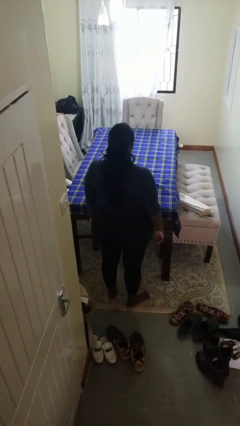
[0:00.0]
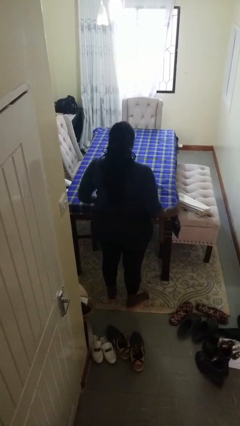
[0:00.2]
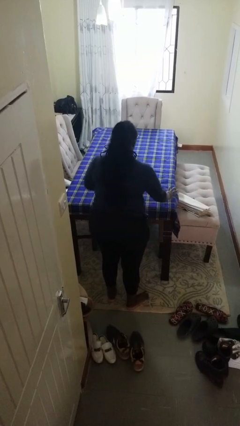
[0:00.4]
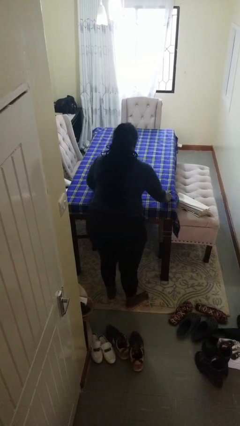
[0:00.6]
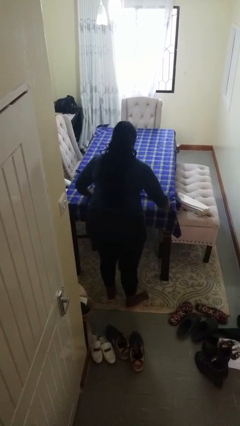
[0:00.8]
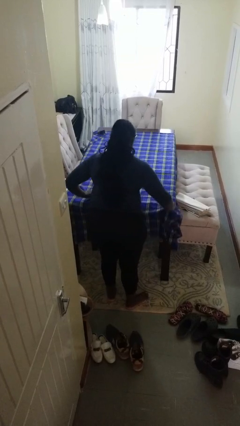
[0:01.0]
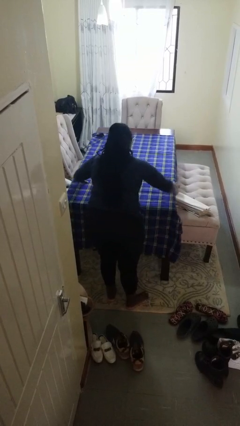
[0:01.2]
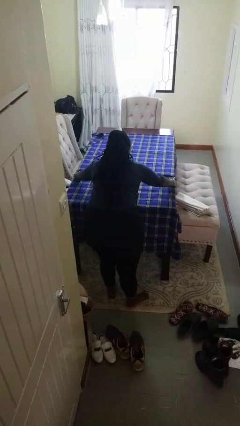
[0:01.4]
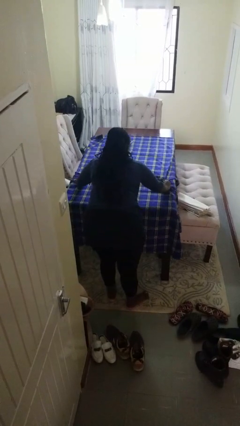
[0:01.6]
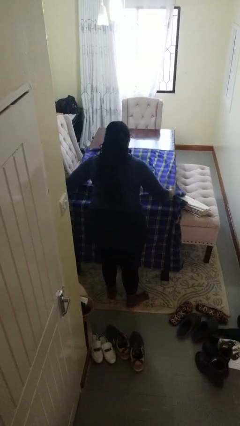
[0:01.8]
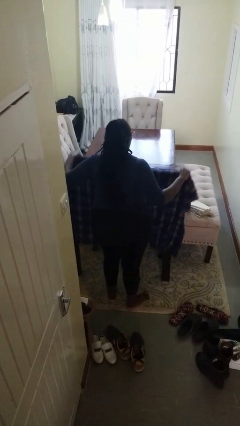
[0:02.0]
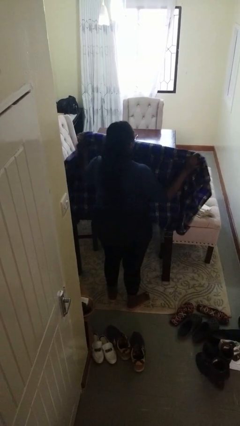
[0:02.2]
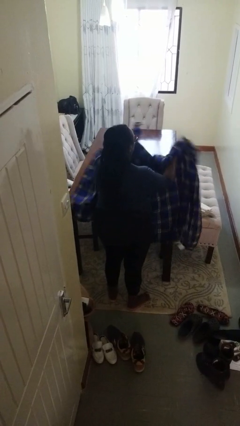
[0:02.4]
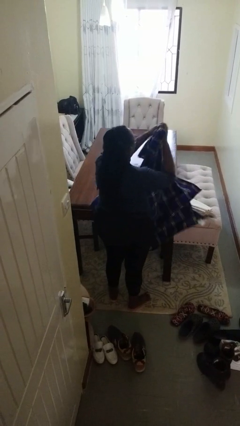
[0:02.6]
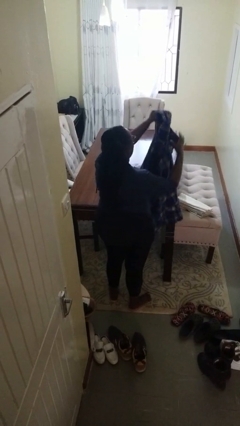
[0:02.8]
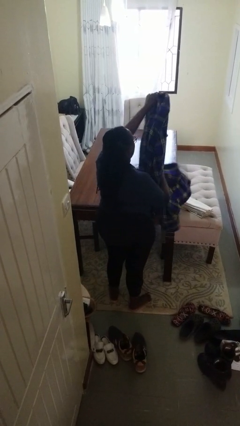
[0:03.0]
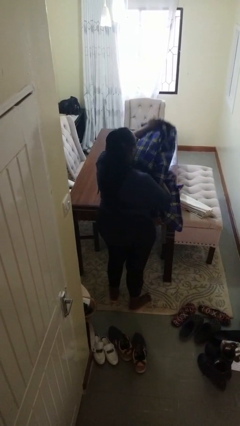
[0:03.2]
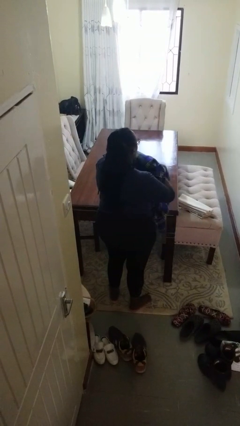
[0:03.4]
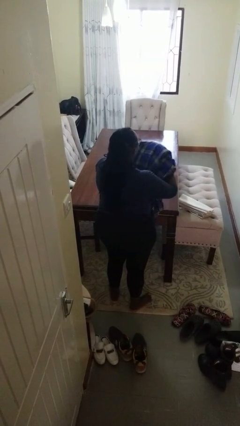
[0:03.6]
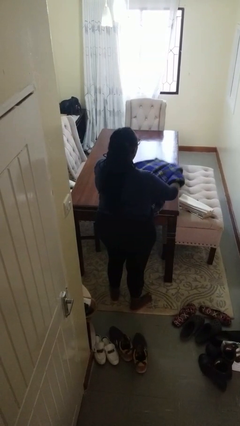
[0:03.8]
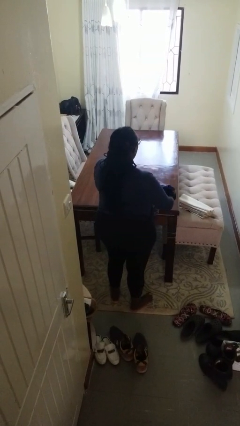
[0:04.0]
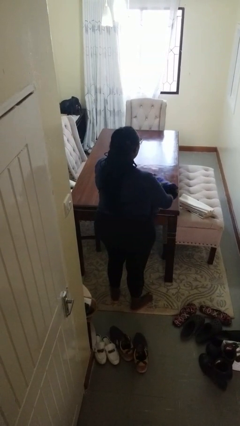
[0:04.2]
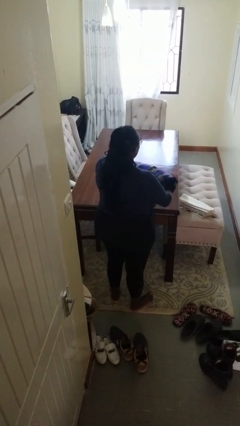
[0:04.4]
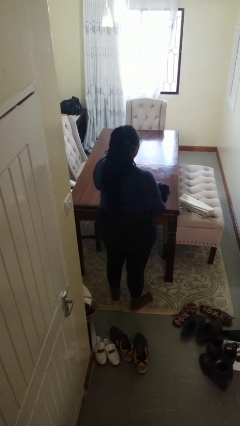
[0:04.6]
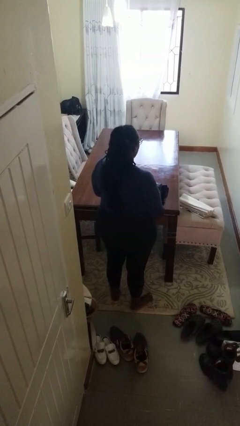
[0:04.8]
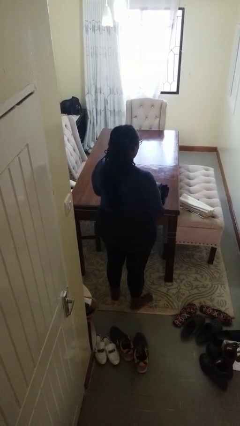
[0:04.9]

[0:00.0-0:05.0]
person folds tablecloth

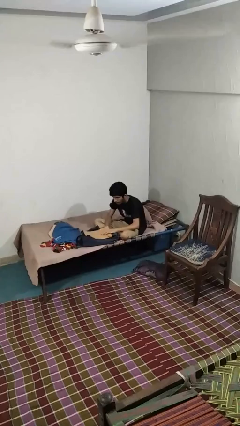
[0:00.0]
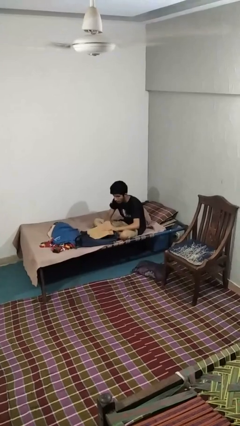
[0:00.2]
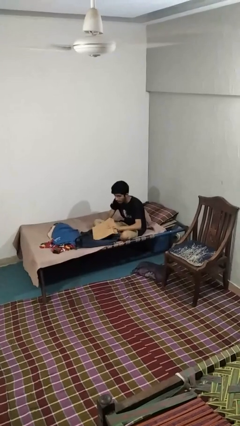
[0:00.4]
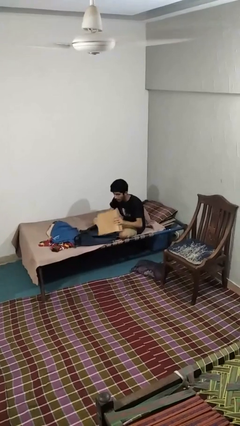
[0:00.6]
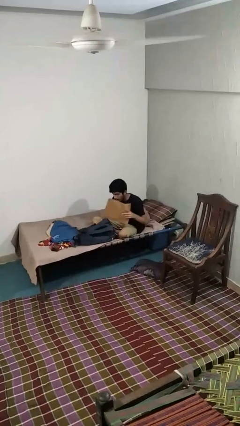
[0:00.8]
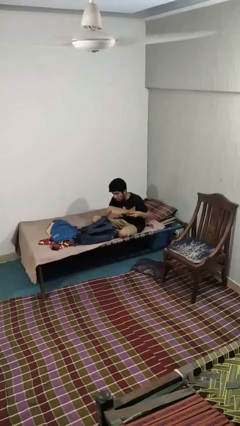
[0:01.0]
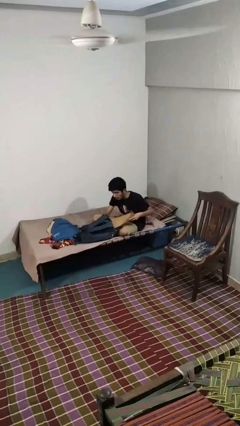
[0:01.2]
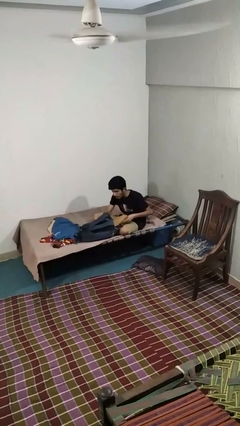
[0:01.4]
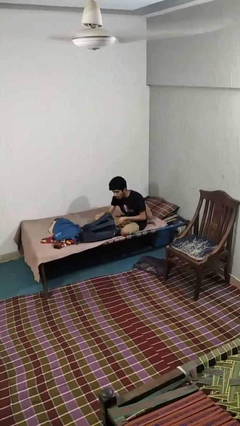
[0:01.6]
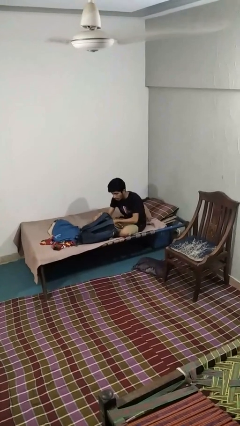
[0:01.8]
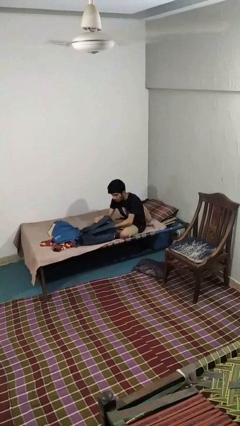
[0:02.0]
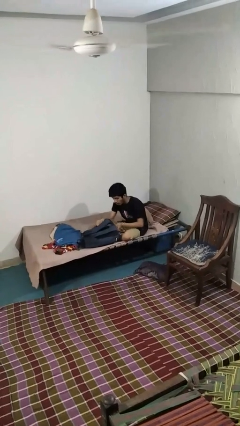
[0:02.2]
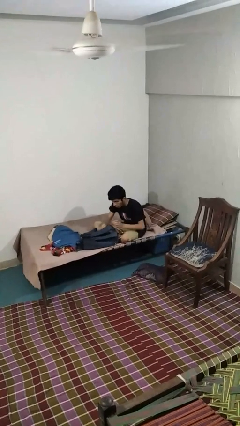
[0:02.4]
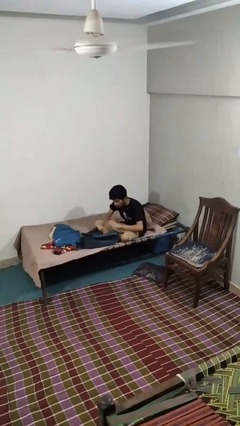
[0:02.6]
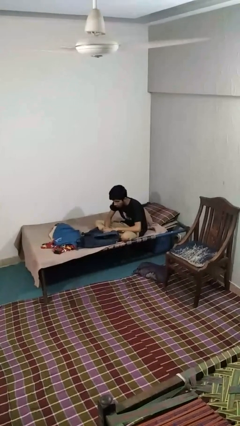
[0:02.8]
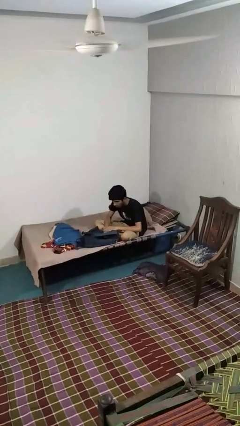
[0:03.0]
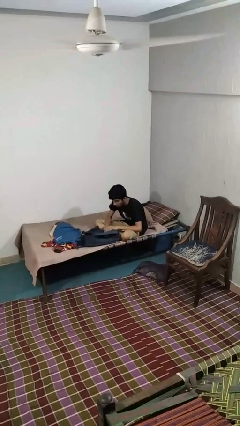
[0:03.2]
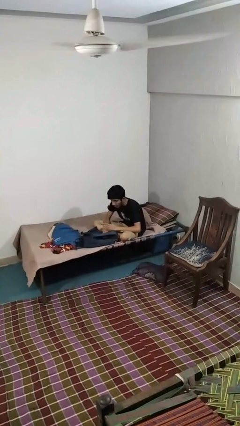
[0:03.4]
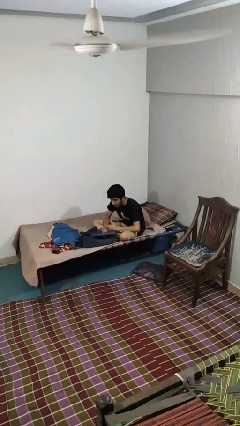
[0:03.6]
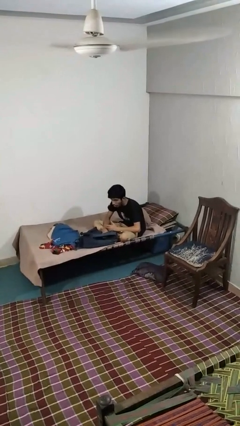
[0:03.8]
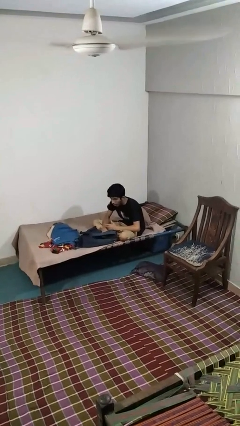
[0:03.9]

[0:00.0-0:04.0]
person puts object into backpack

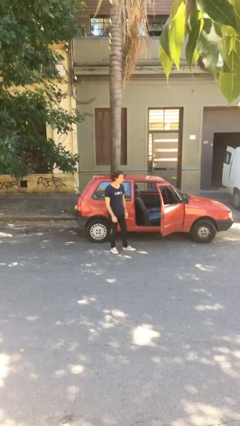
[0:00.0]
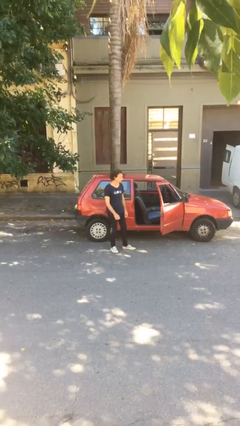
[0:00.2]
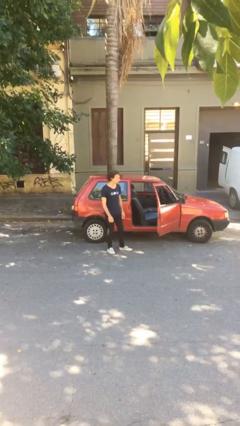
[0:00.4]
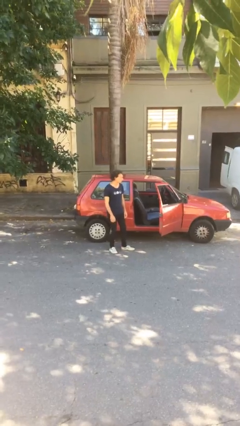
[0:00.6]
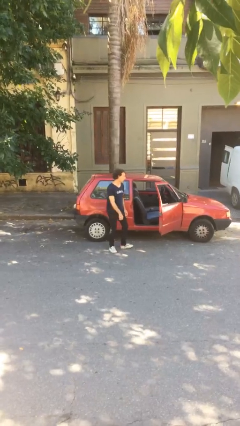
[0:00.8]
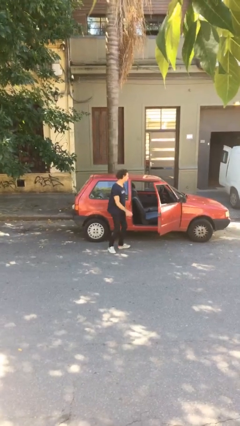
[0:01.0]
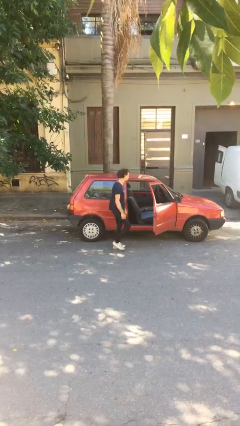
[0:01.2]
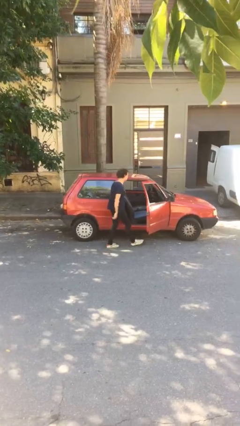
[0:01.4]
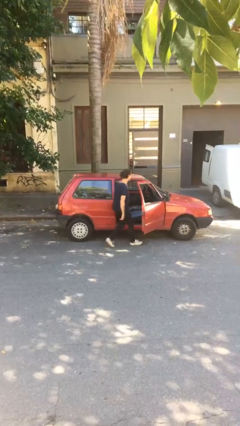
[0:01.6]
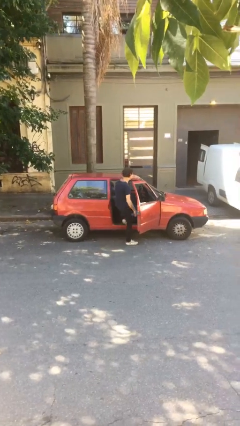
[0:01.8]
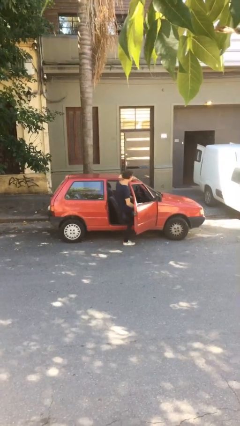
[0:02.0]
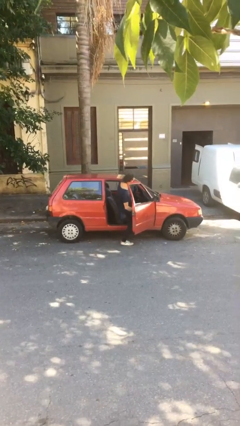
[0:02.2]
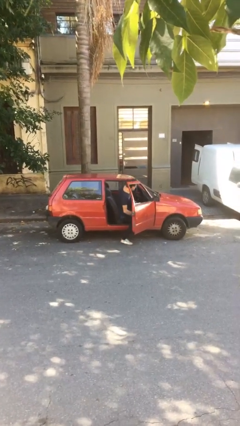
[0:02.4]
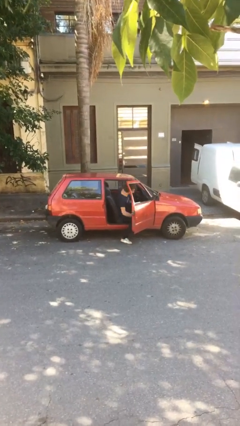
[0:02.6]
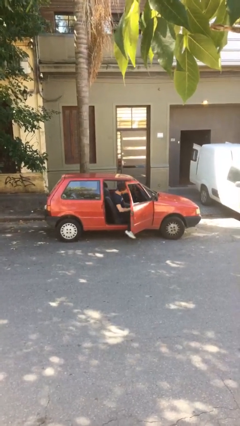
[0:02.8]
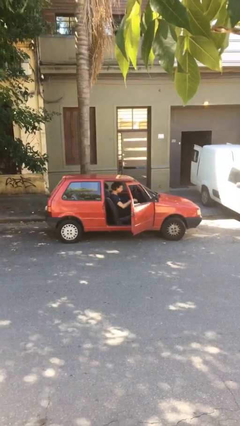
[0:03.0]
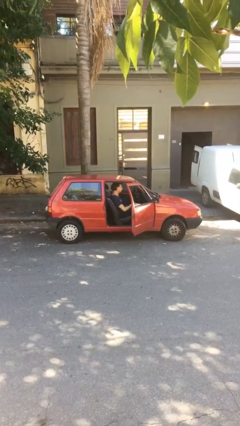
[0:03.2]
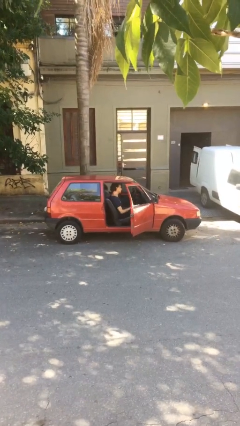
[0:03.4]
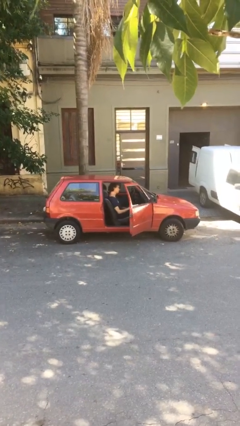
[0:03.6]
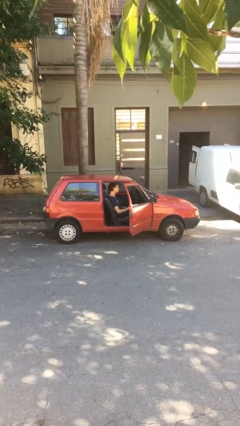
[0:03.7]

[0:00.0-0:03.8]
person enters car

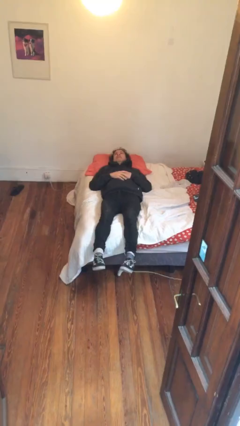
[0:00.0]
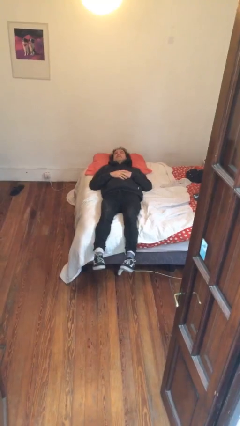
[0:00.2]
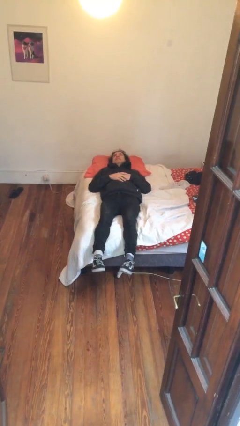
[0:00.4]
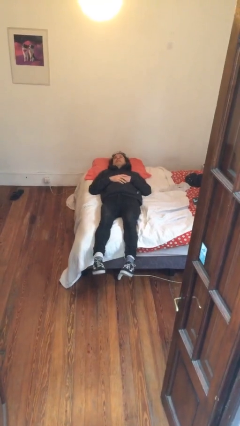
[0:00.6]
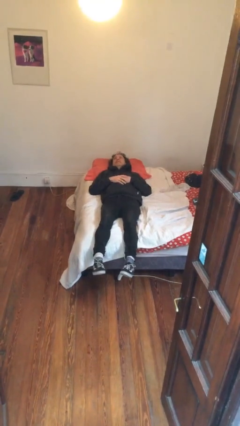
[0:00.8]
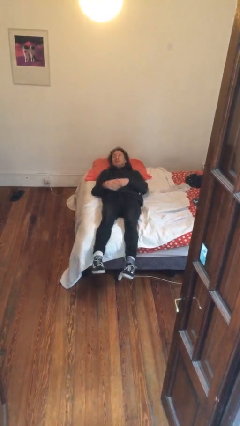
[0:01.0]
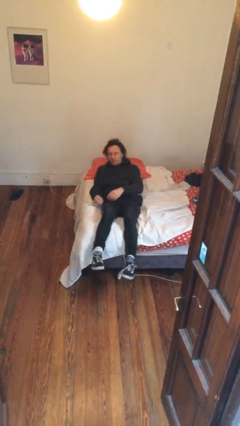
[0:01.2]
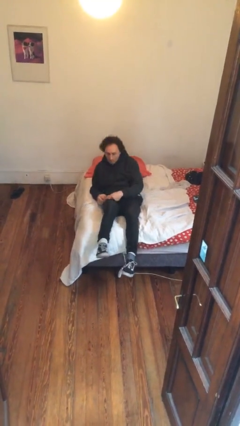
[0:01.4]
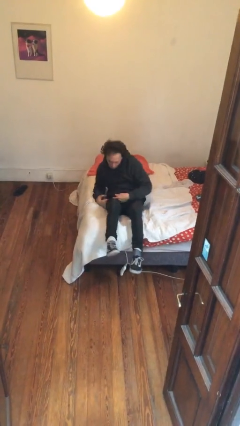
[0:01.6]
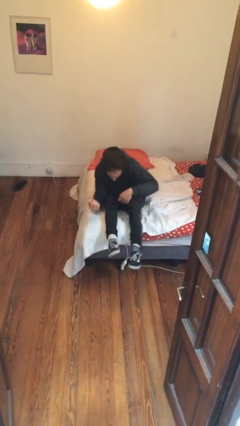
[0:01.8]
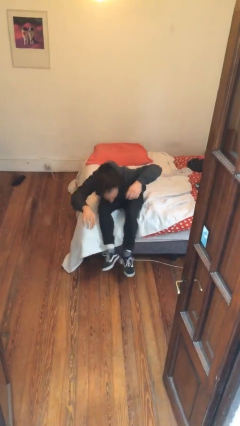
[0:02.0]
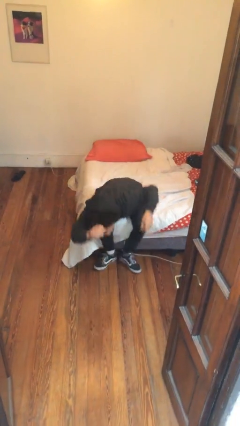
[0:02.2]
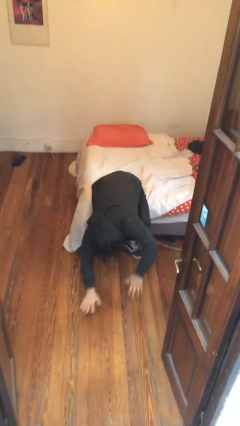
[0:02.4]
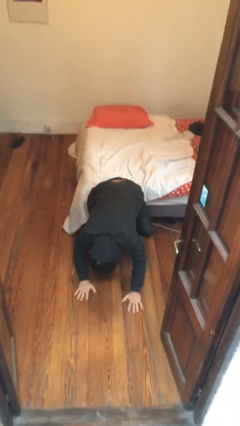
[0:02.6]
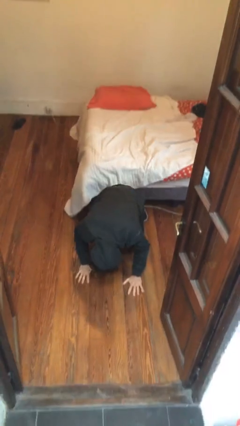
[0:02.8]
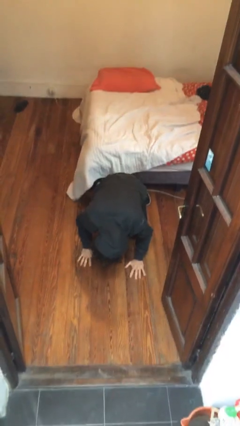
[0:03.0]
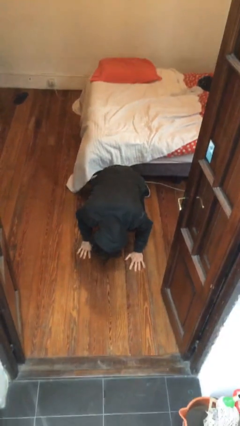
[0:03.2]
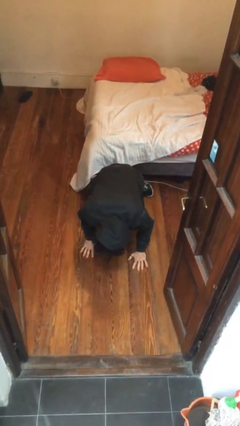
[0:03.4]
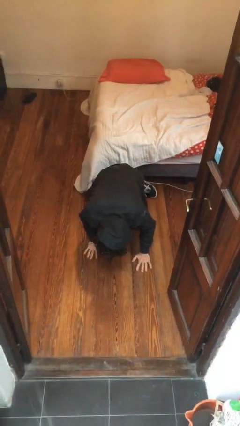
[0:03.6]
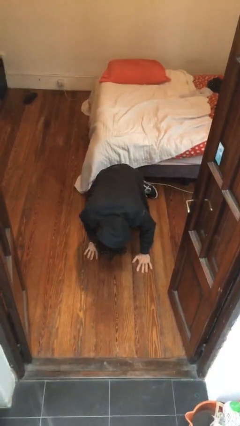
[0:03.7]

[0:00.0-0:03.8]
person falls from bed

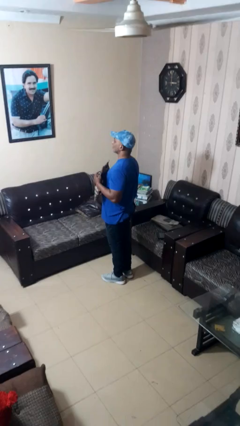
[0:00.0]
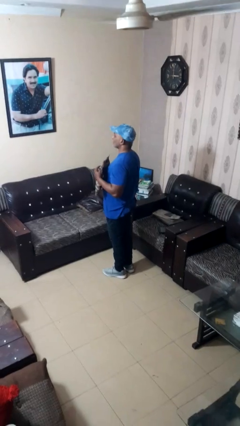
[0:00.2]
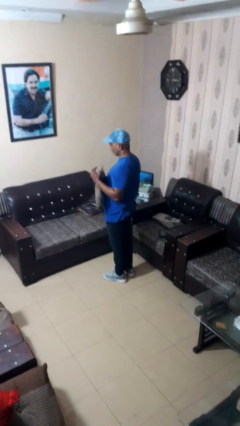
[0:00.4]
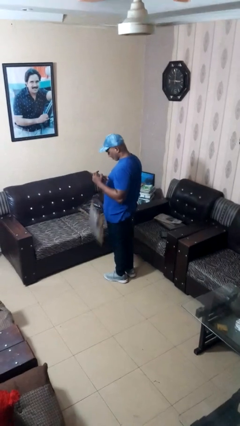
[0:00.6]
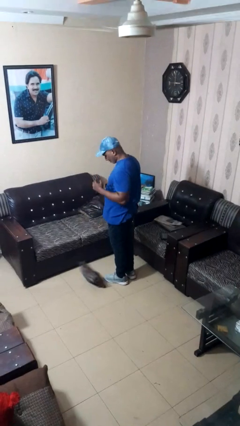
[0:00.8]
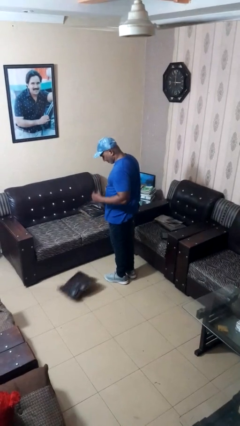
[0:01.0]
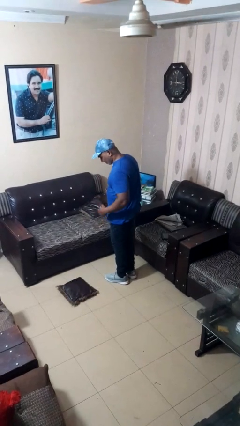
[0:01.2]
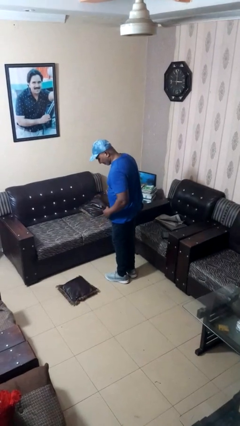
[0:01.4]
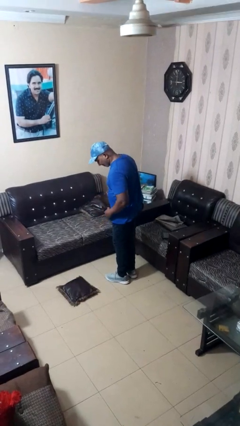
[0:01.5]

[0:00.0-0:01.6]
person drops object
